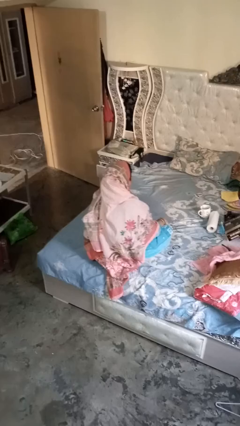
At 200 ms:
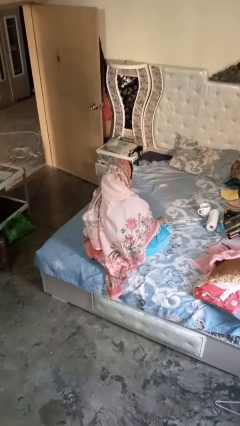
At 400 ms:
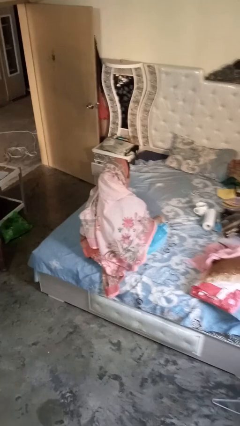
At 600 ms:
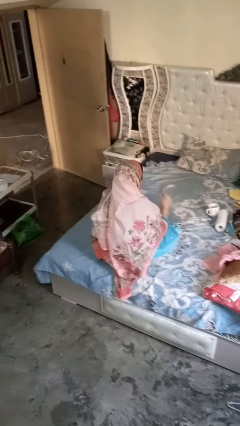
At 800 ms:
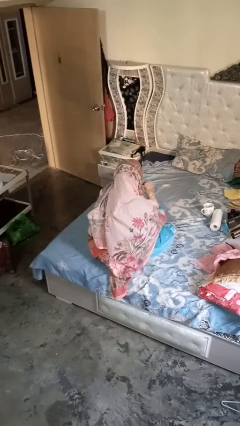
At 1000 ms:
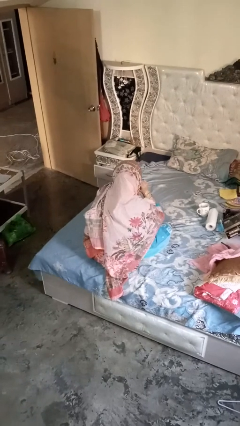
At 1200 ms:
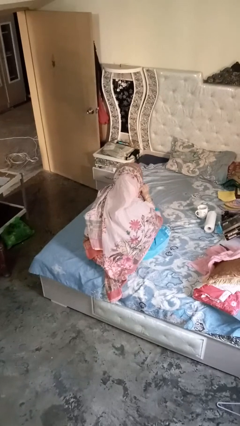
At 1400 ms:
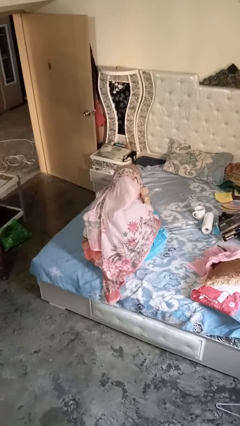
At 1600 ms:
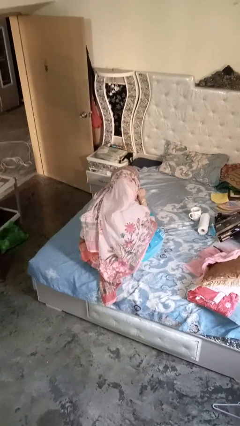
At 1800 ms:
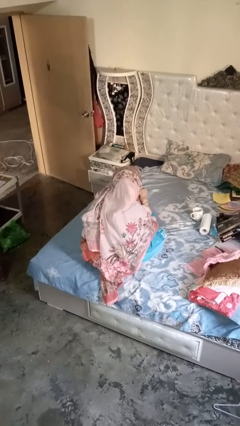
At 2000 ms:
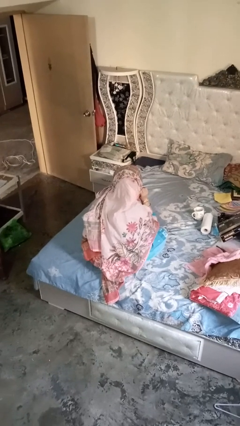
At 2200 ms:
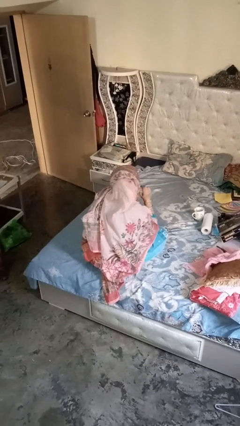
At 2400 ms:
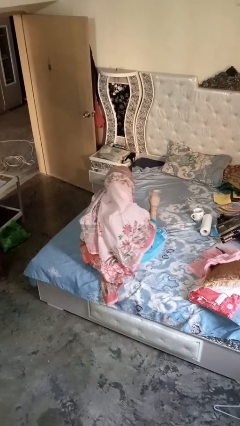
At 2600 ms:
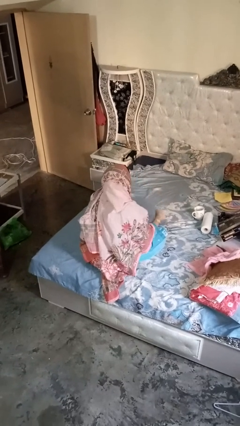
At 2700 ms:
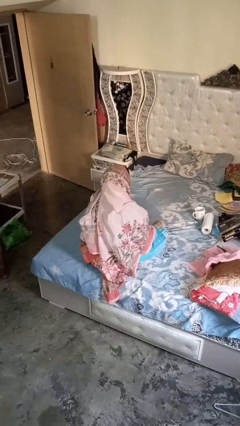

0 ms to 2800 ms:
person gestures listen closely

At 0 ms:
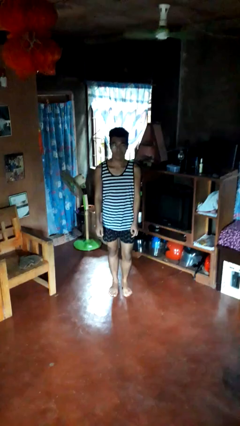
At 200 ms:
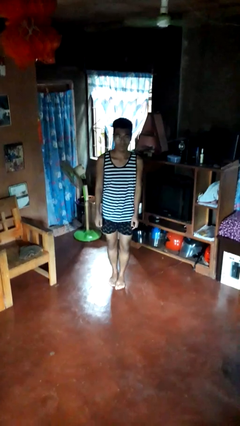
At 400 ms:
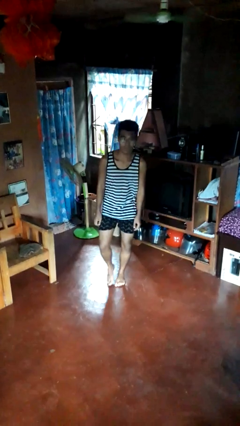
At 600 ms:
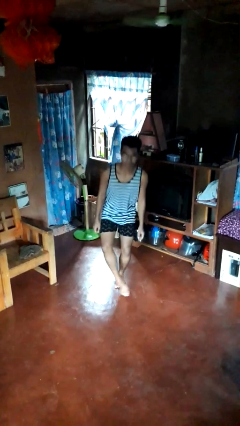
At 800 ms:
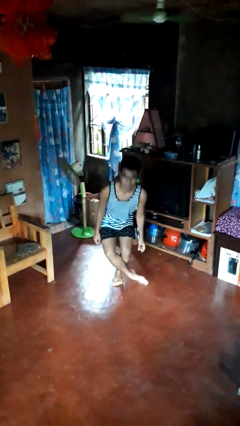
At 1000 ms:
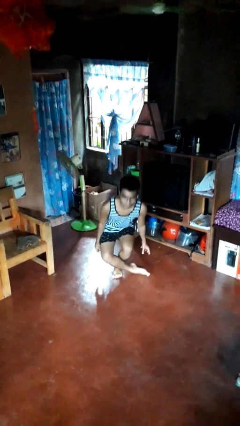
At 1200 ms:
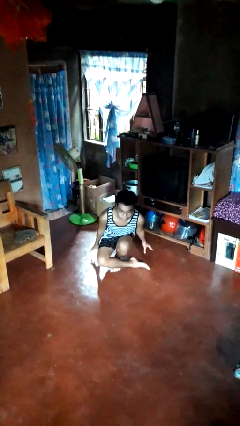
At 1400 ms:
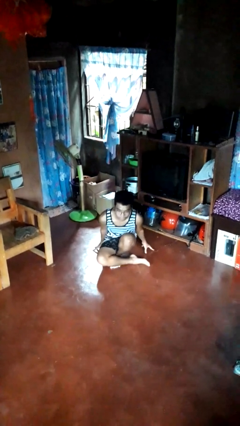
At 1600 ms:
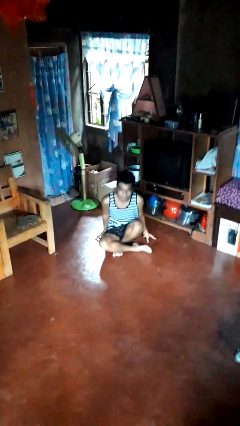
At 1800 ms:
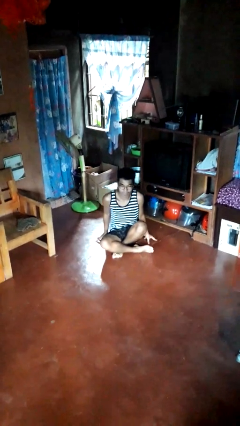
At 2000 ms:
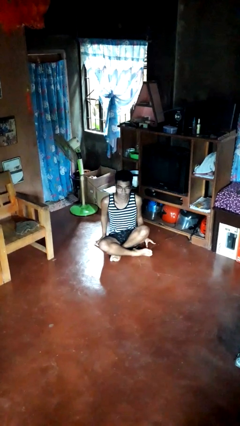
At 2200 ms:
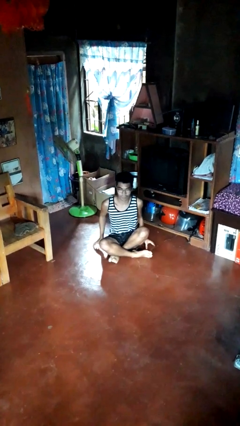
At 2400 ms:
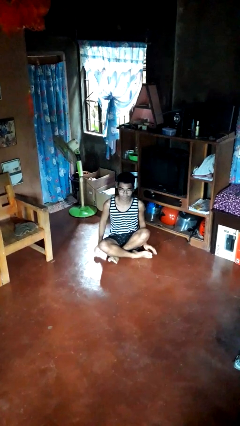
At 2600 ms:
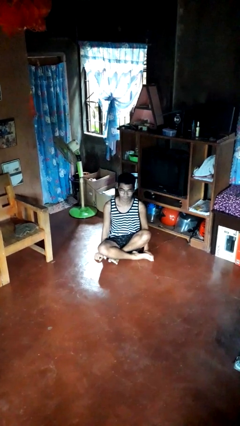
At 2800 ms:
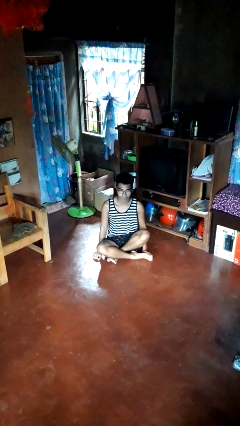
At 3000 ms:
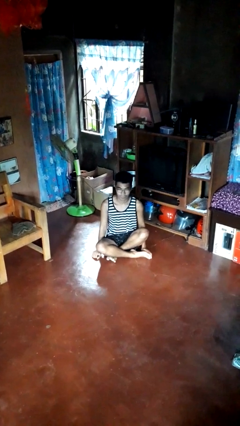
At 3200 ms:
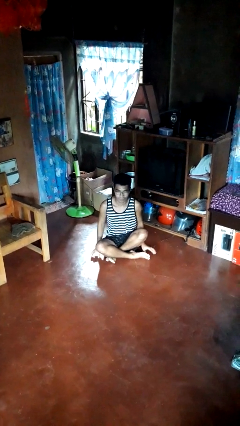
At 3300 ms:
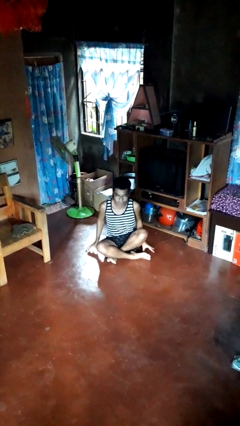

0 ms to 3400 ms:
person sits crisscross

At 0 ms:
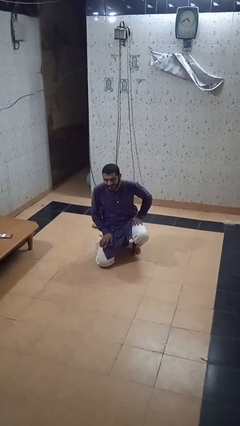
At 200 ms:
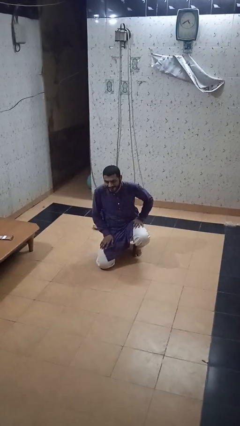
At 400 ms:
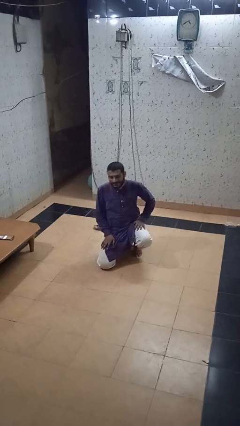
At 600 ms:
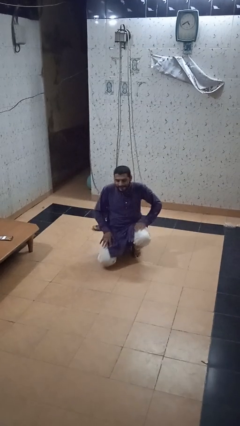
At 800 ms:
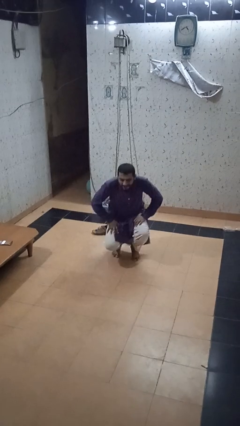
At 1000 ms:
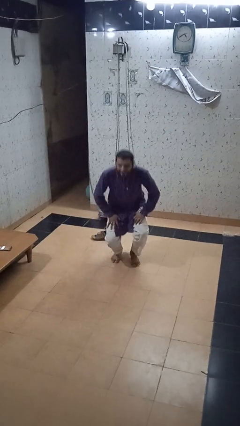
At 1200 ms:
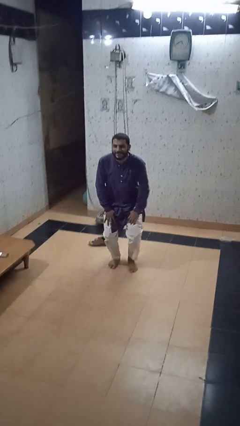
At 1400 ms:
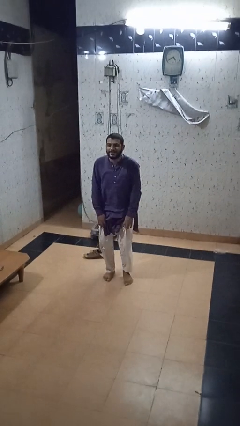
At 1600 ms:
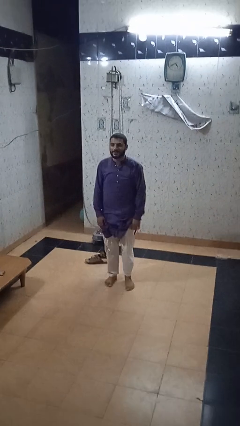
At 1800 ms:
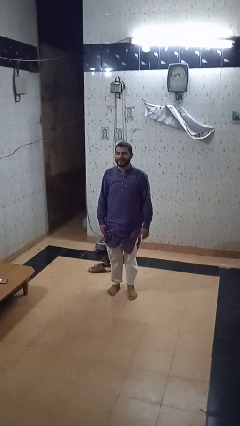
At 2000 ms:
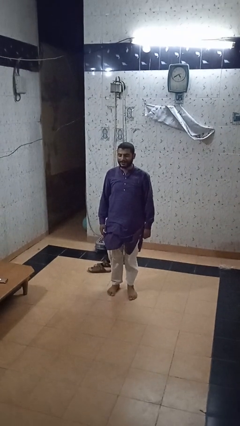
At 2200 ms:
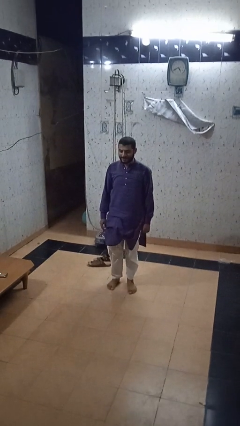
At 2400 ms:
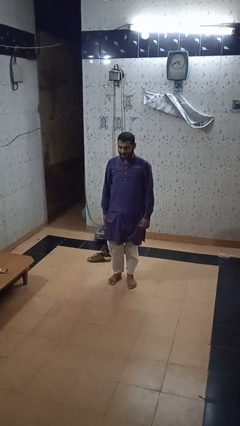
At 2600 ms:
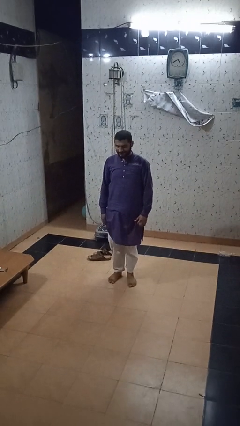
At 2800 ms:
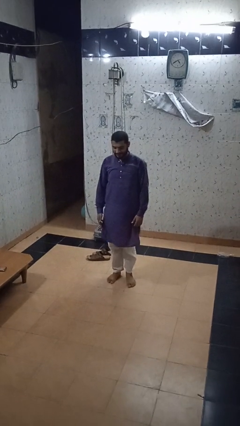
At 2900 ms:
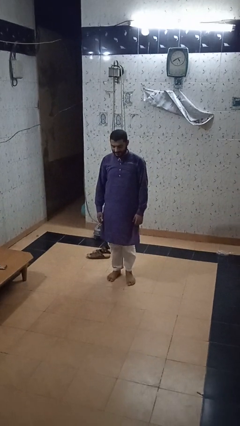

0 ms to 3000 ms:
person stands up from floor

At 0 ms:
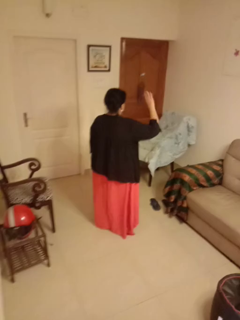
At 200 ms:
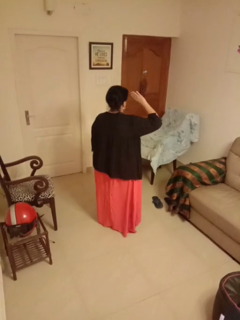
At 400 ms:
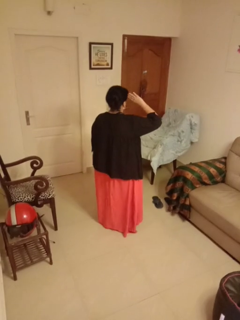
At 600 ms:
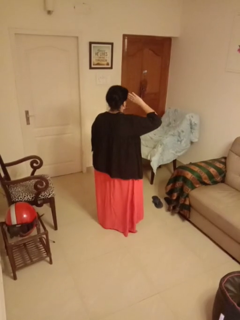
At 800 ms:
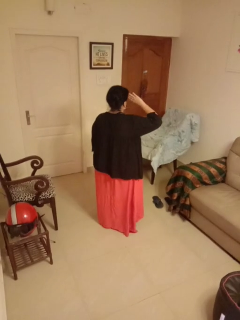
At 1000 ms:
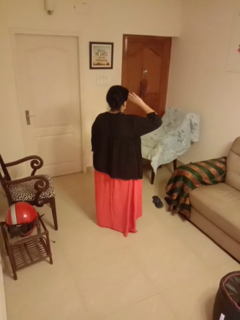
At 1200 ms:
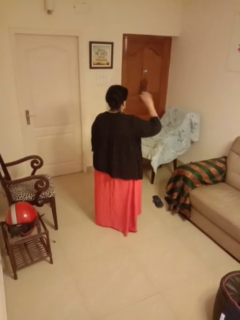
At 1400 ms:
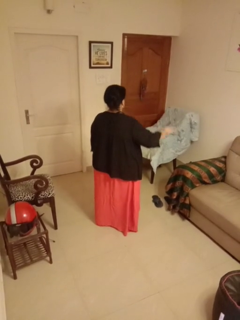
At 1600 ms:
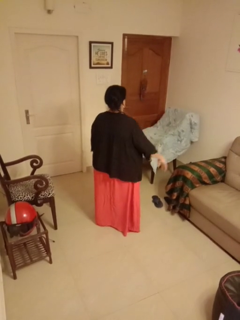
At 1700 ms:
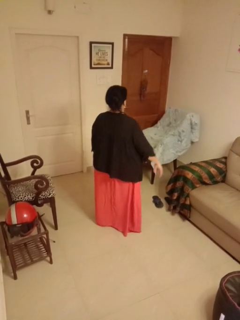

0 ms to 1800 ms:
person salutes

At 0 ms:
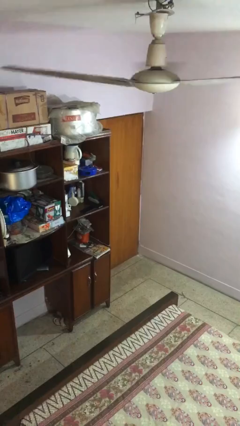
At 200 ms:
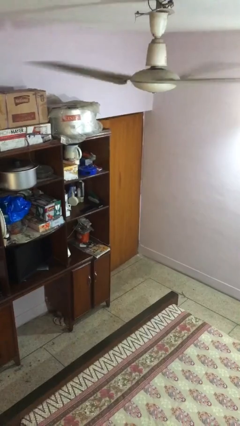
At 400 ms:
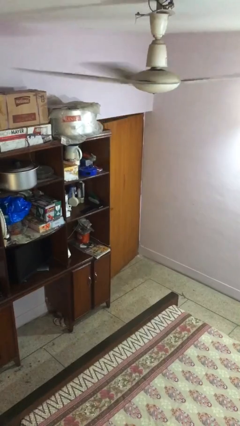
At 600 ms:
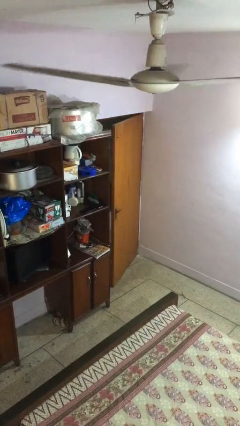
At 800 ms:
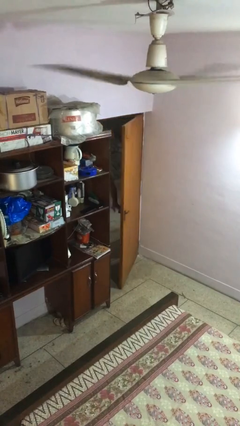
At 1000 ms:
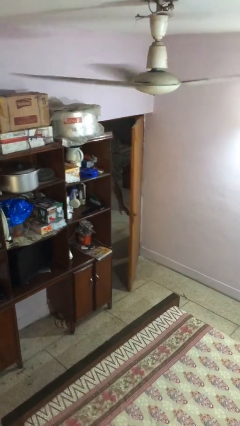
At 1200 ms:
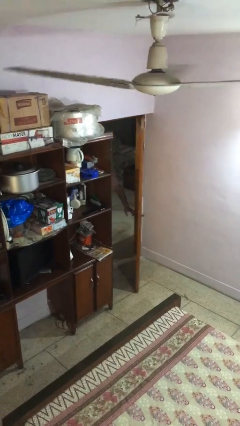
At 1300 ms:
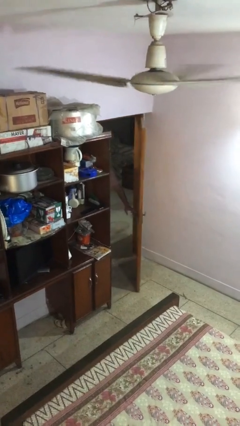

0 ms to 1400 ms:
person opens facility door

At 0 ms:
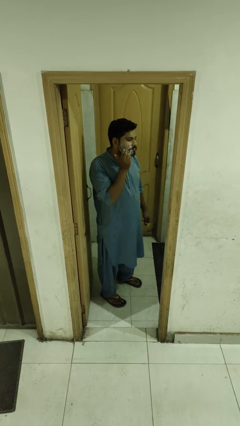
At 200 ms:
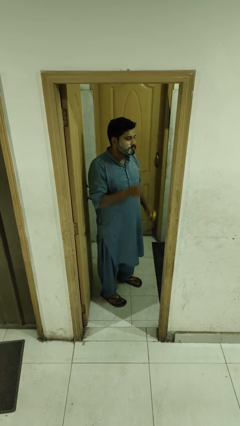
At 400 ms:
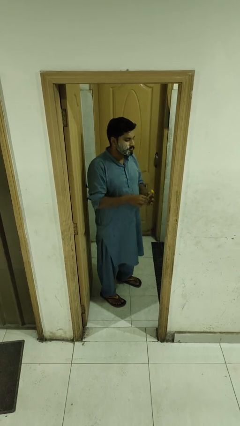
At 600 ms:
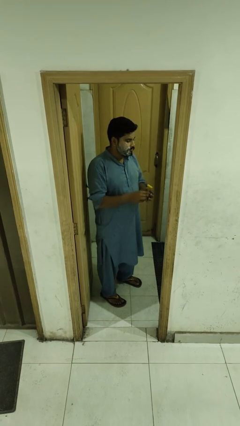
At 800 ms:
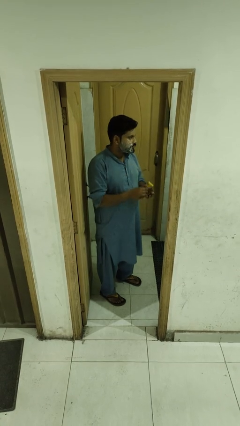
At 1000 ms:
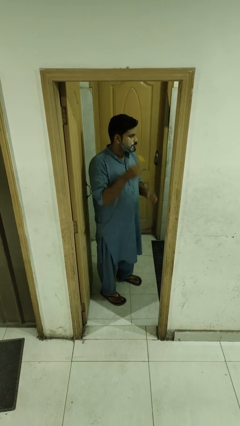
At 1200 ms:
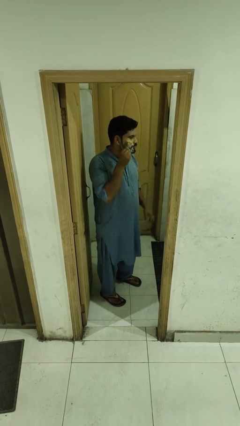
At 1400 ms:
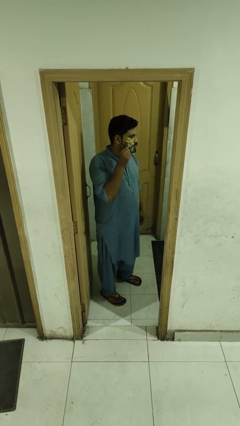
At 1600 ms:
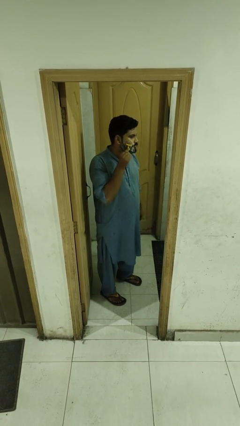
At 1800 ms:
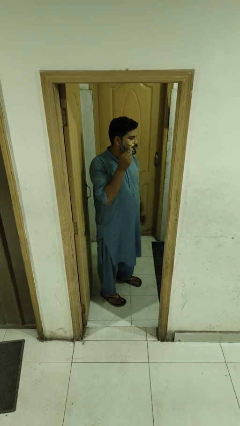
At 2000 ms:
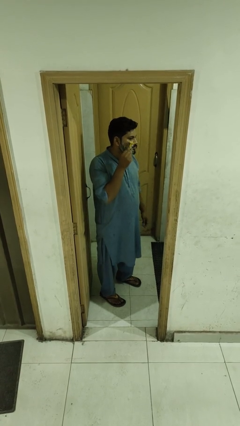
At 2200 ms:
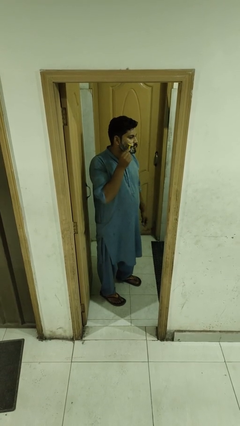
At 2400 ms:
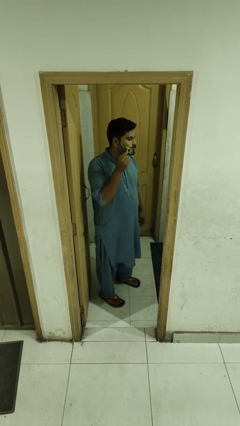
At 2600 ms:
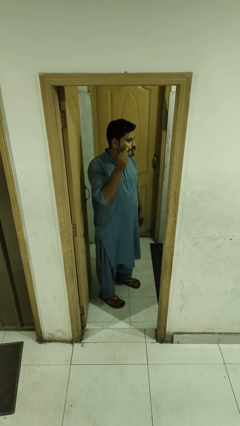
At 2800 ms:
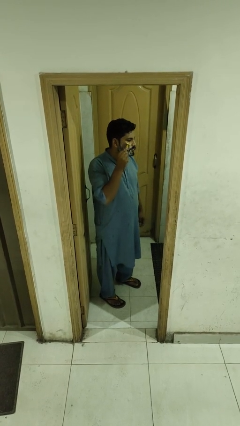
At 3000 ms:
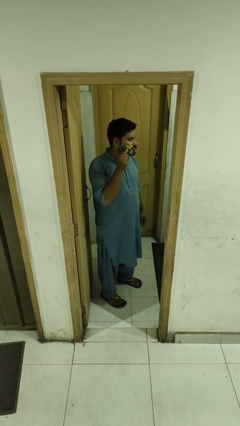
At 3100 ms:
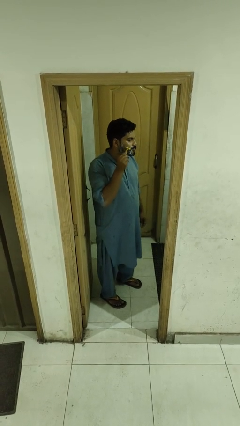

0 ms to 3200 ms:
person shaves face

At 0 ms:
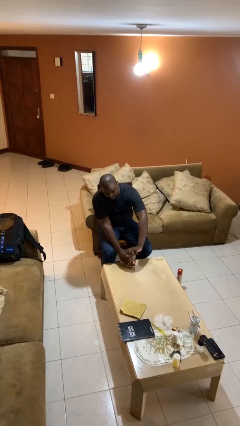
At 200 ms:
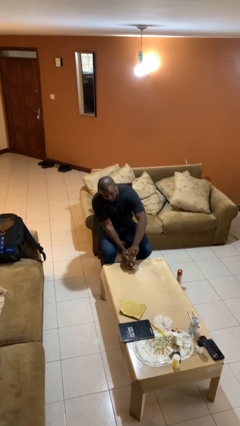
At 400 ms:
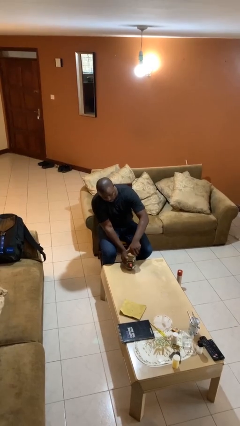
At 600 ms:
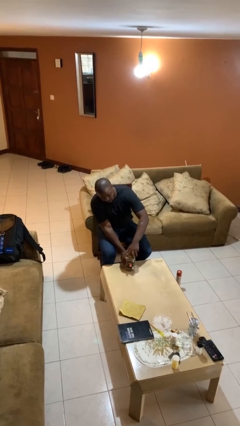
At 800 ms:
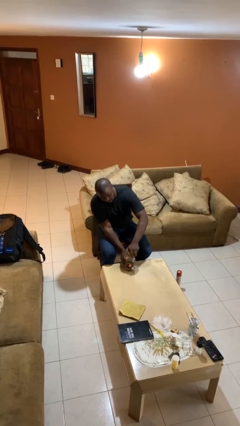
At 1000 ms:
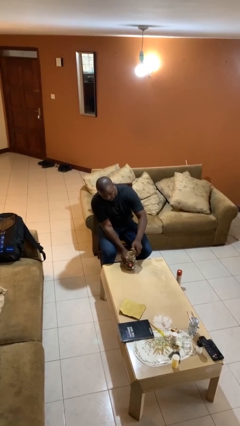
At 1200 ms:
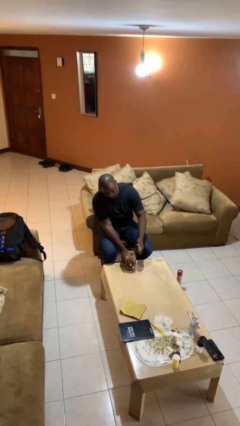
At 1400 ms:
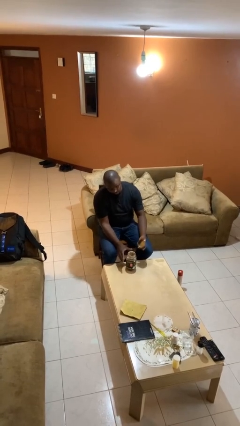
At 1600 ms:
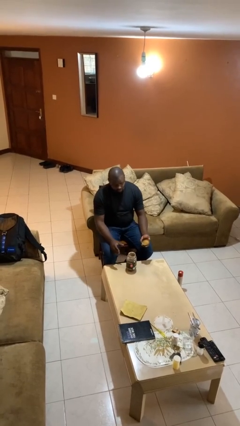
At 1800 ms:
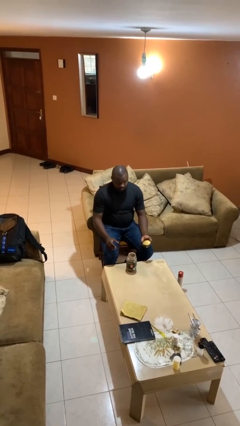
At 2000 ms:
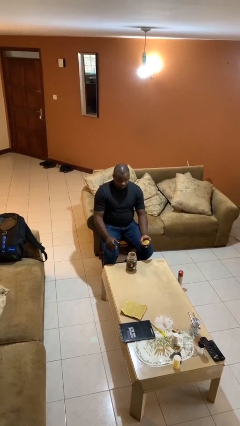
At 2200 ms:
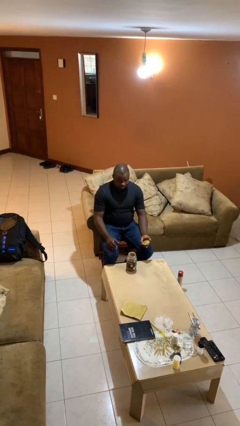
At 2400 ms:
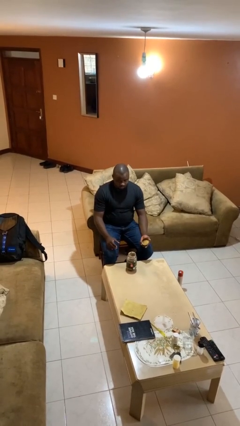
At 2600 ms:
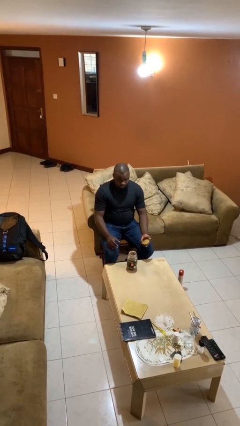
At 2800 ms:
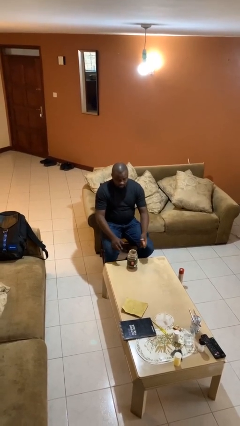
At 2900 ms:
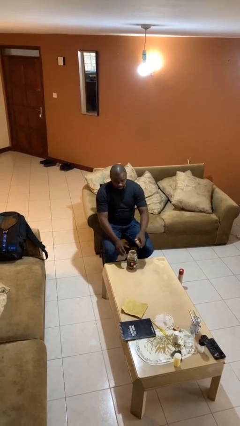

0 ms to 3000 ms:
person opens jar
